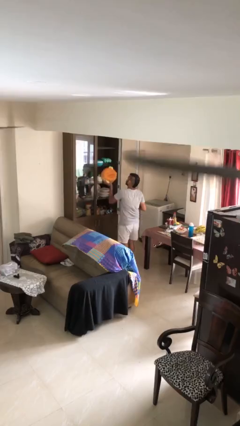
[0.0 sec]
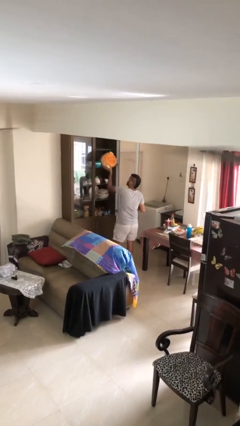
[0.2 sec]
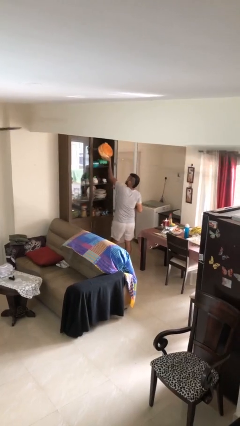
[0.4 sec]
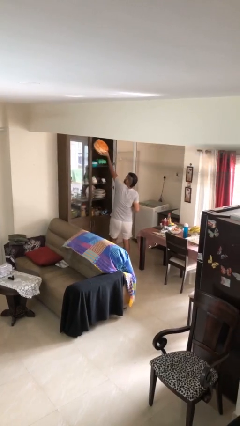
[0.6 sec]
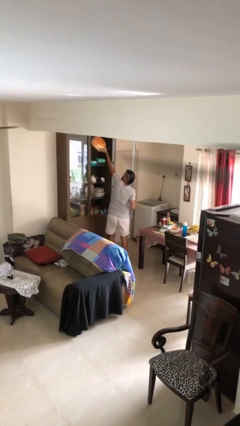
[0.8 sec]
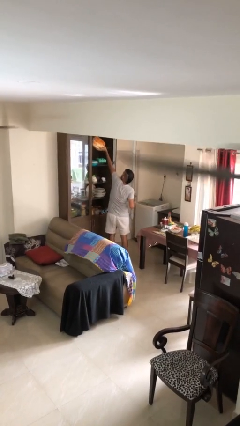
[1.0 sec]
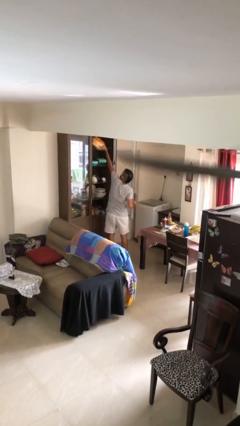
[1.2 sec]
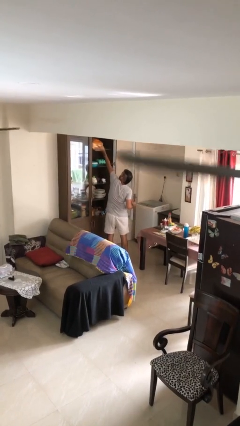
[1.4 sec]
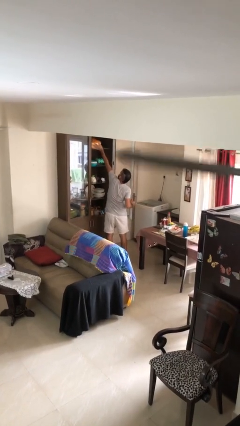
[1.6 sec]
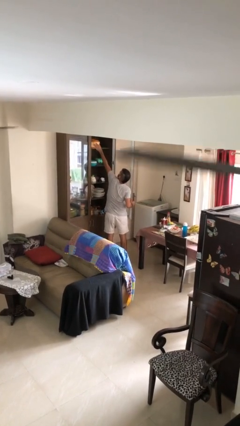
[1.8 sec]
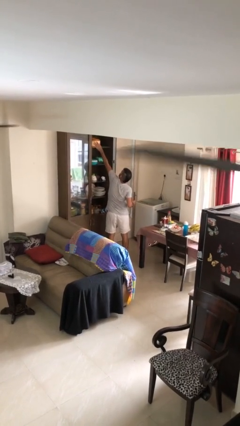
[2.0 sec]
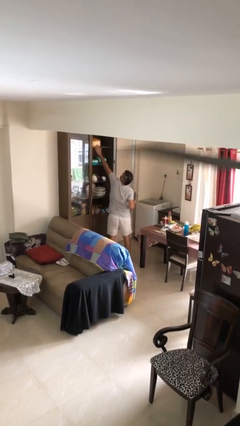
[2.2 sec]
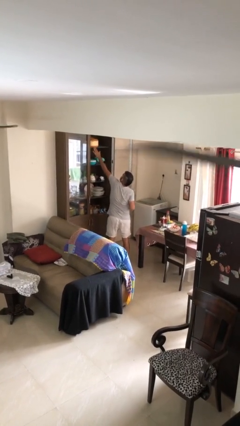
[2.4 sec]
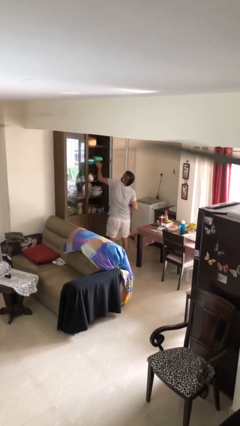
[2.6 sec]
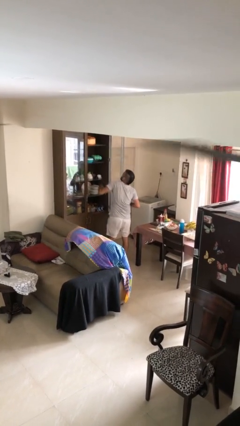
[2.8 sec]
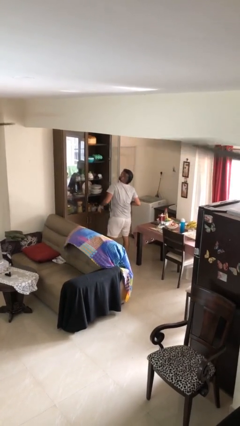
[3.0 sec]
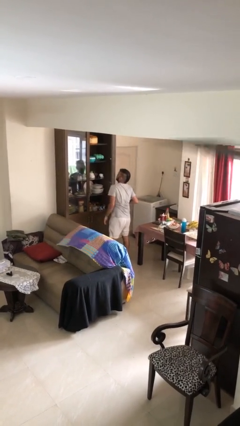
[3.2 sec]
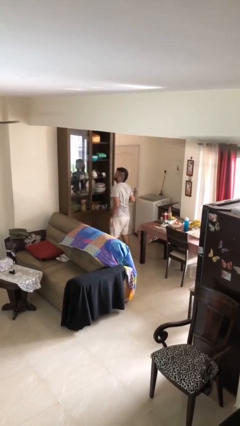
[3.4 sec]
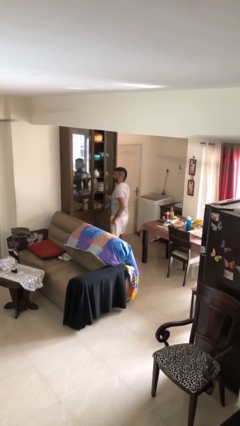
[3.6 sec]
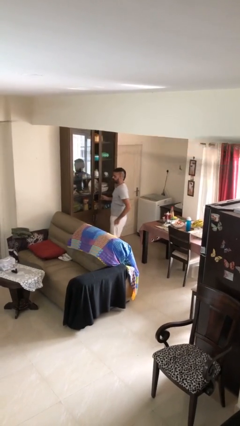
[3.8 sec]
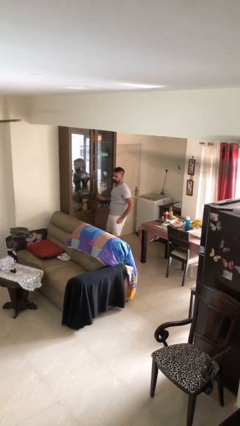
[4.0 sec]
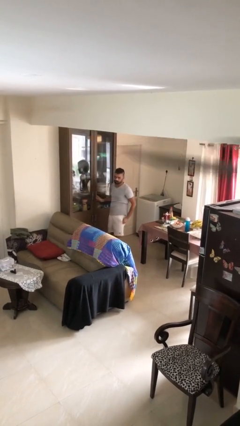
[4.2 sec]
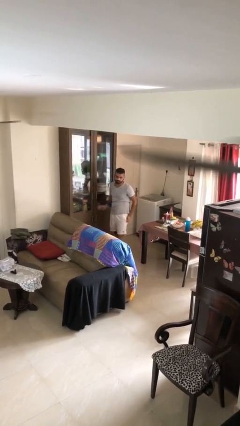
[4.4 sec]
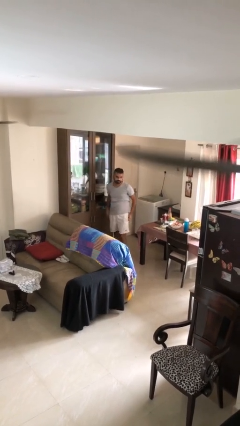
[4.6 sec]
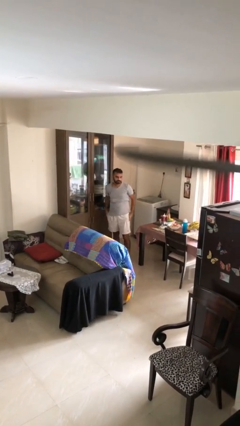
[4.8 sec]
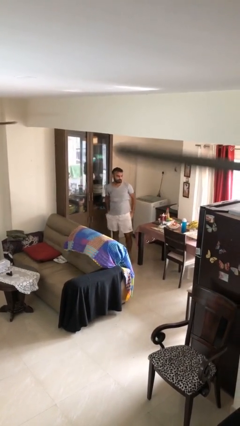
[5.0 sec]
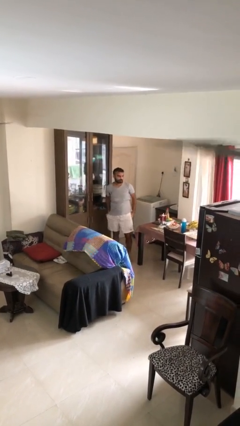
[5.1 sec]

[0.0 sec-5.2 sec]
person puts down object on shelf

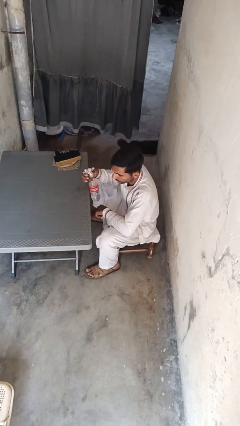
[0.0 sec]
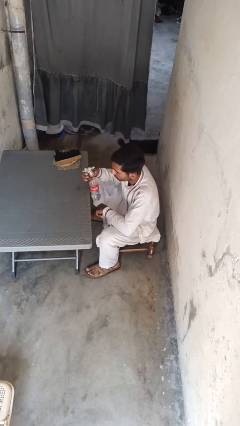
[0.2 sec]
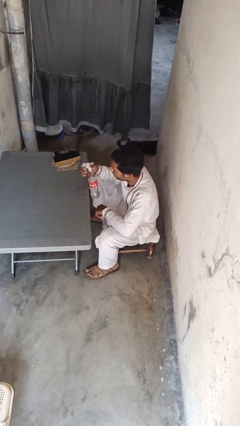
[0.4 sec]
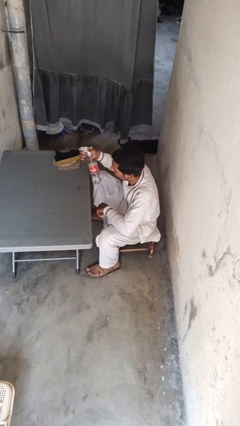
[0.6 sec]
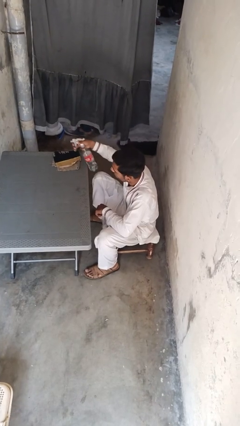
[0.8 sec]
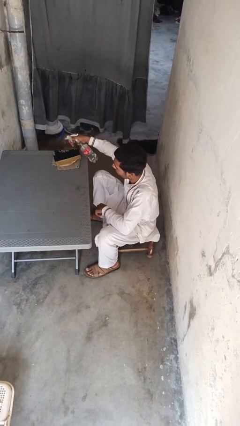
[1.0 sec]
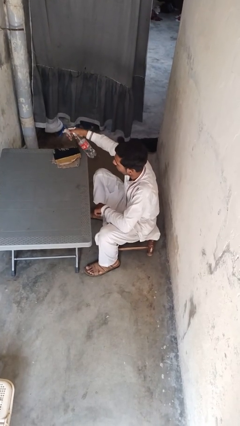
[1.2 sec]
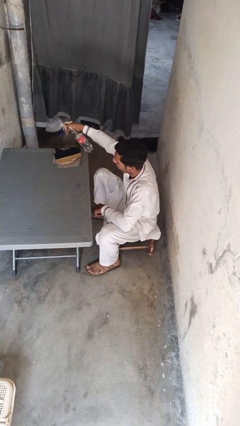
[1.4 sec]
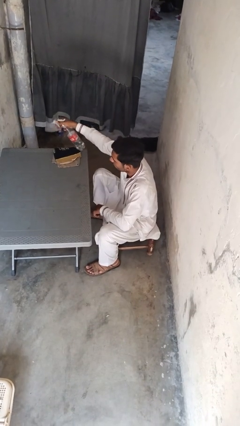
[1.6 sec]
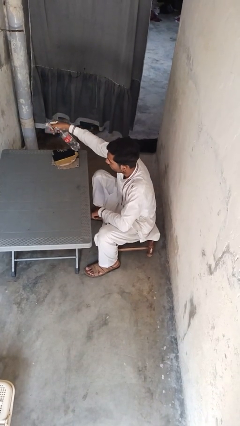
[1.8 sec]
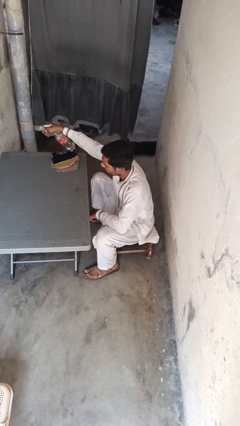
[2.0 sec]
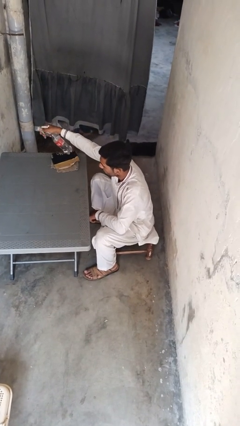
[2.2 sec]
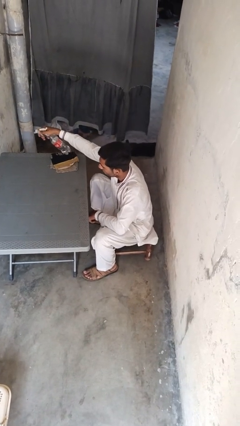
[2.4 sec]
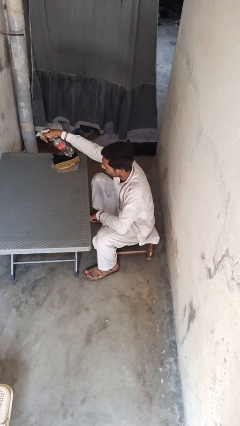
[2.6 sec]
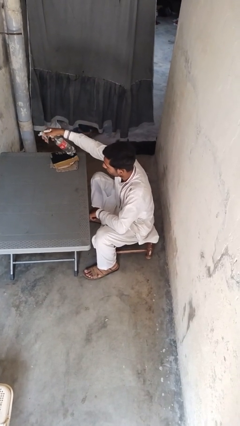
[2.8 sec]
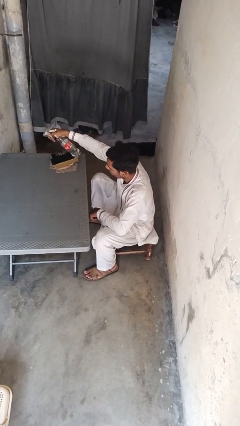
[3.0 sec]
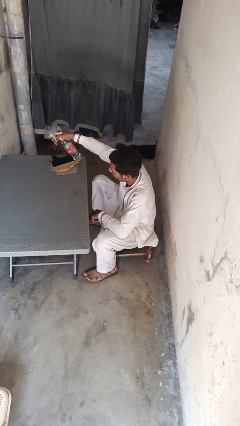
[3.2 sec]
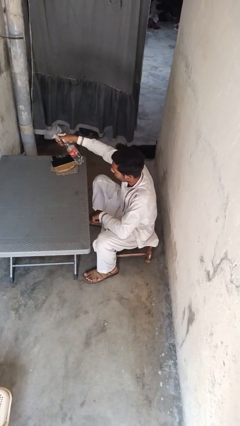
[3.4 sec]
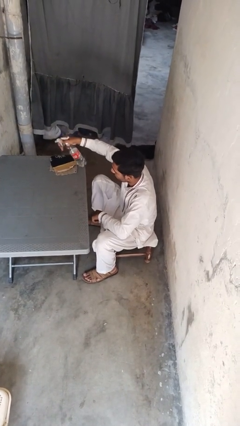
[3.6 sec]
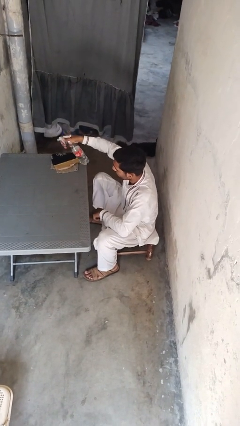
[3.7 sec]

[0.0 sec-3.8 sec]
person sprays from bottle

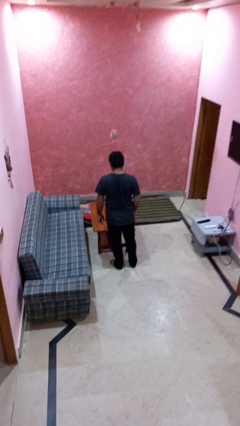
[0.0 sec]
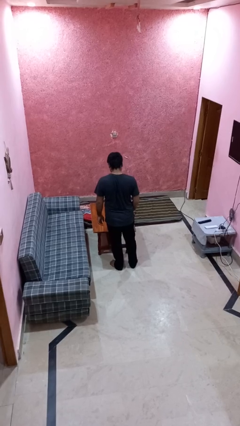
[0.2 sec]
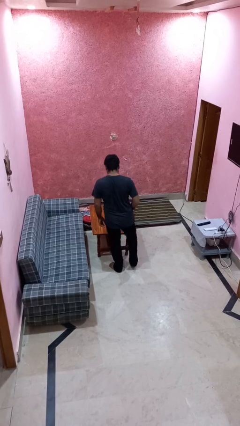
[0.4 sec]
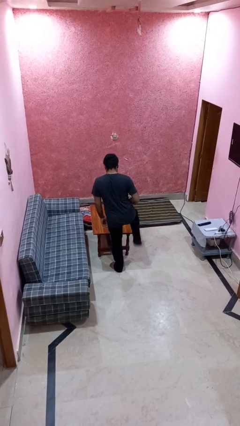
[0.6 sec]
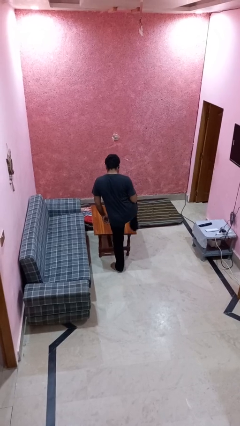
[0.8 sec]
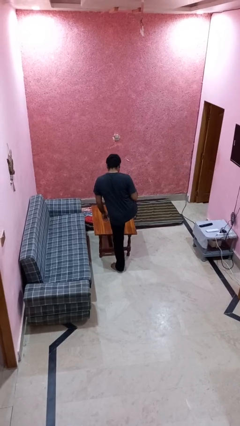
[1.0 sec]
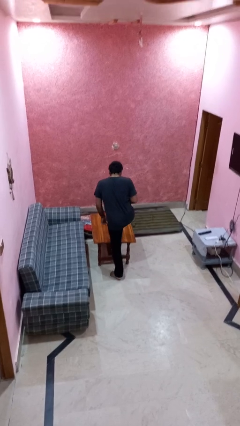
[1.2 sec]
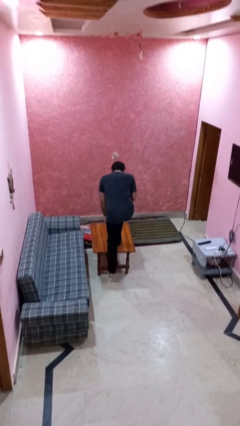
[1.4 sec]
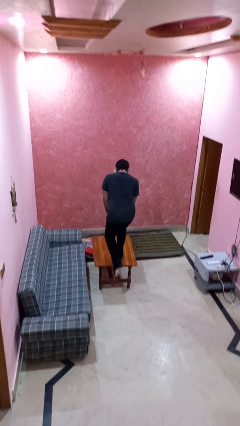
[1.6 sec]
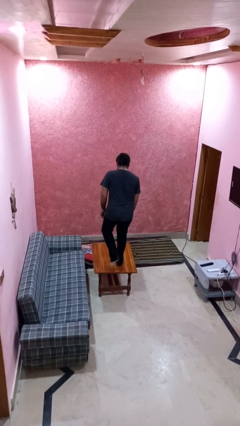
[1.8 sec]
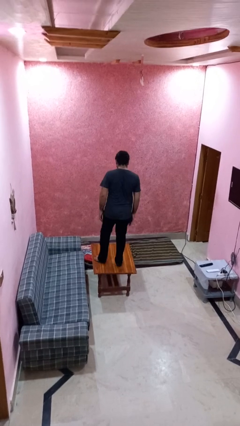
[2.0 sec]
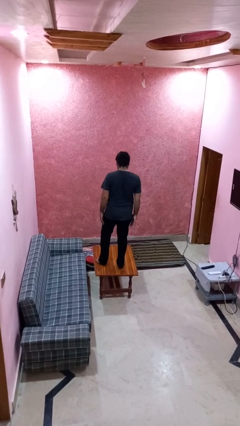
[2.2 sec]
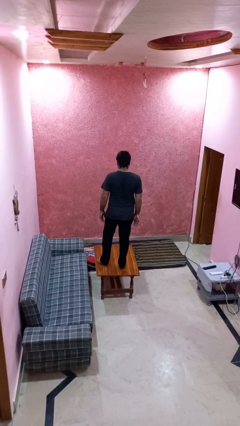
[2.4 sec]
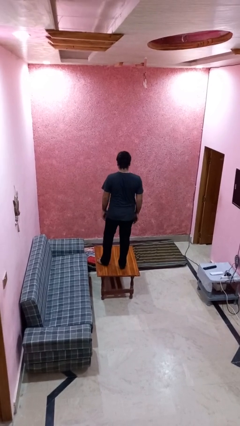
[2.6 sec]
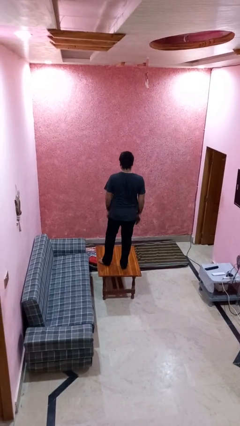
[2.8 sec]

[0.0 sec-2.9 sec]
person climbs on table

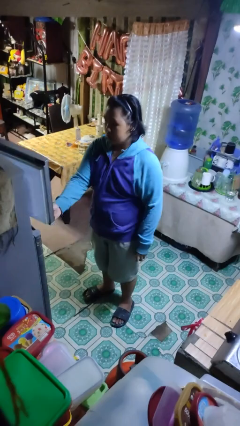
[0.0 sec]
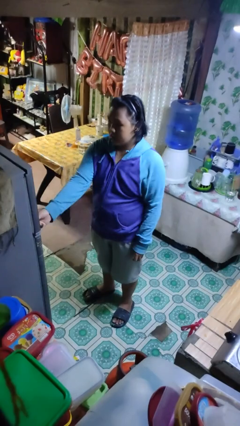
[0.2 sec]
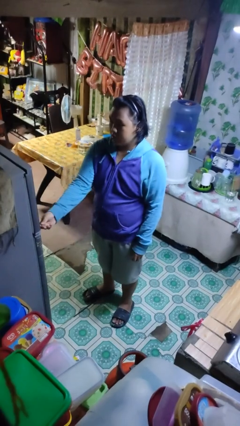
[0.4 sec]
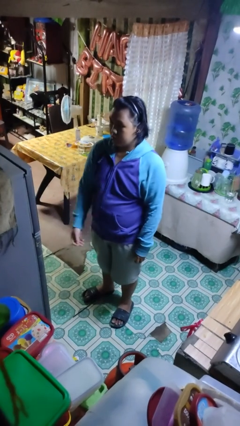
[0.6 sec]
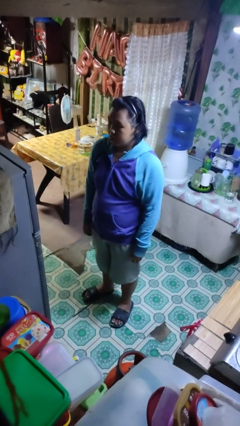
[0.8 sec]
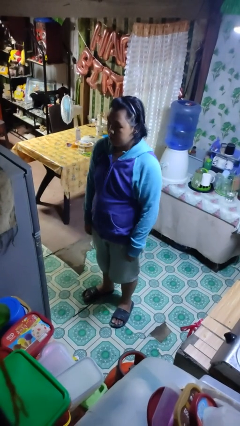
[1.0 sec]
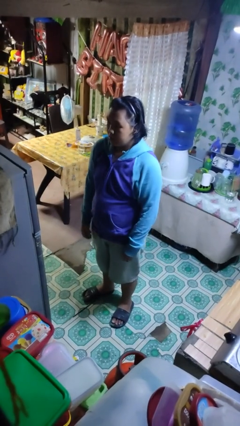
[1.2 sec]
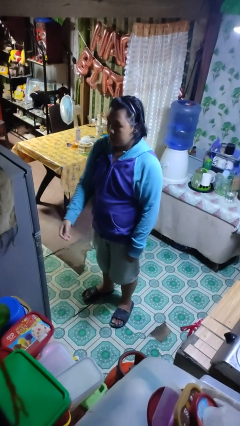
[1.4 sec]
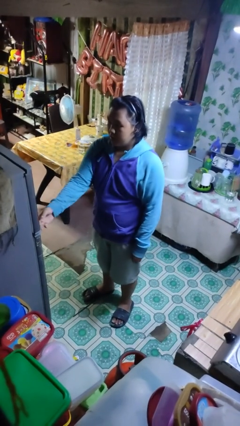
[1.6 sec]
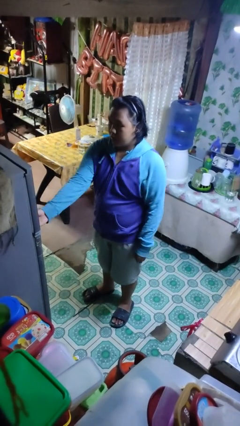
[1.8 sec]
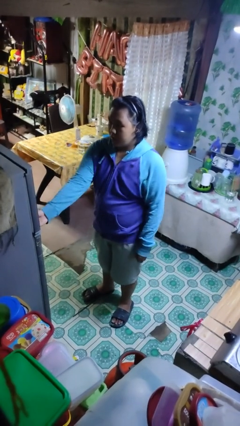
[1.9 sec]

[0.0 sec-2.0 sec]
person closes refrigerator

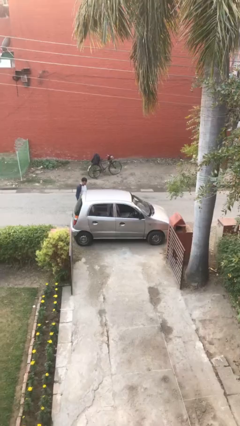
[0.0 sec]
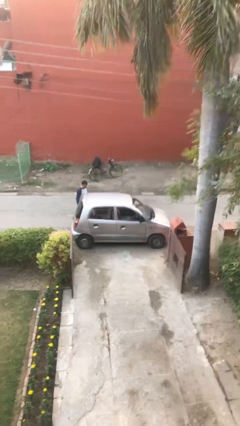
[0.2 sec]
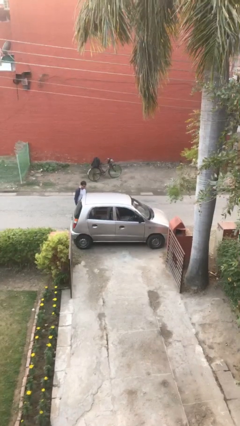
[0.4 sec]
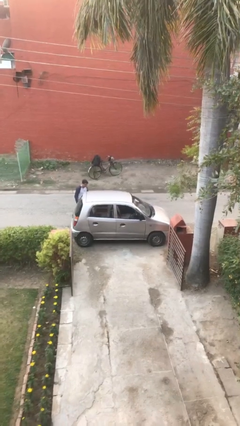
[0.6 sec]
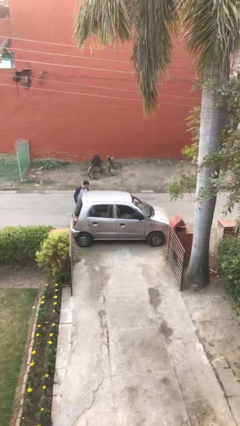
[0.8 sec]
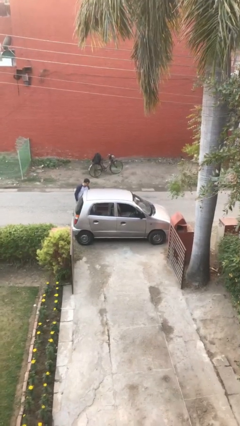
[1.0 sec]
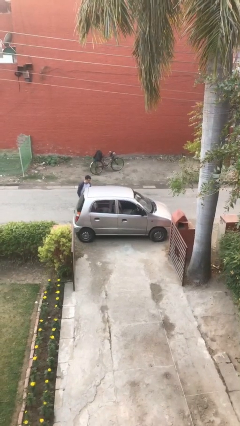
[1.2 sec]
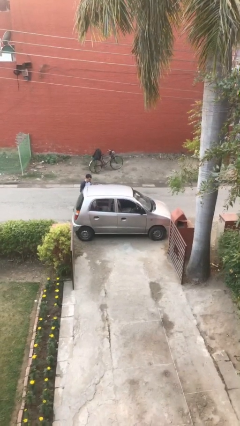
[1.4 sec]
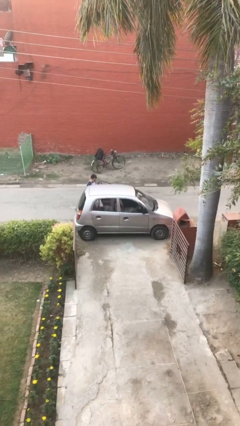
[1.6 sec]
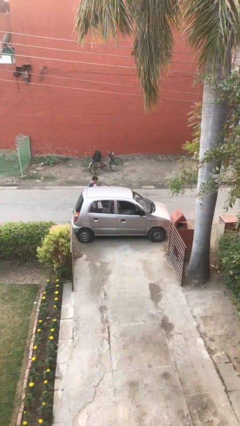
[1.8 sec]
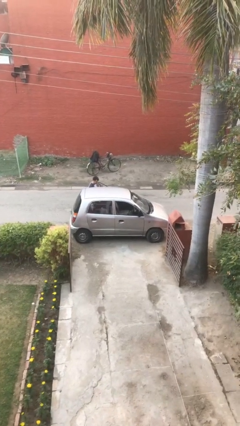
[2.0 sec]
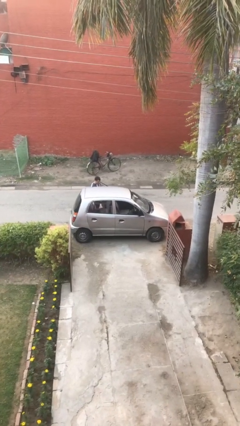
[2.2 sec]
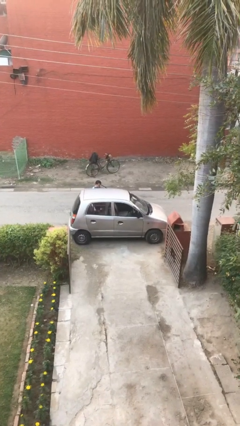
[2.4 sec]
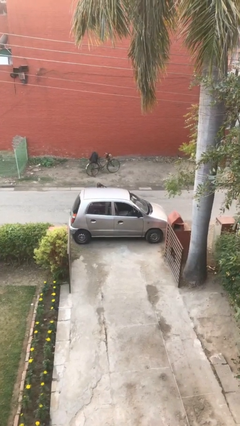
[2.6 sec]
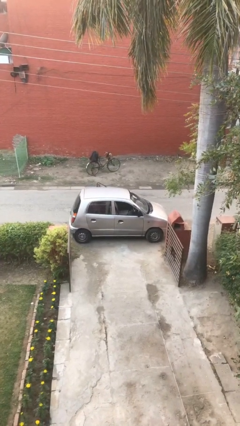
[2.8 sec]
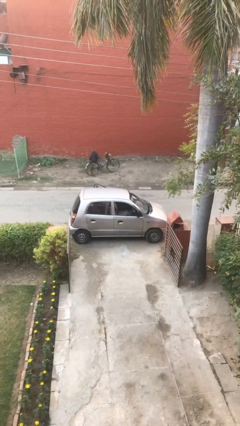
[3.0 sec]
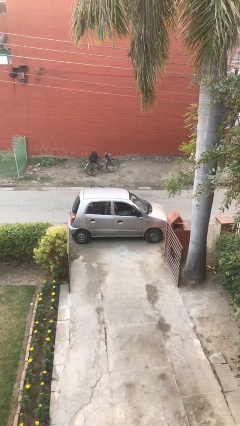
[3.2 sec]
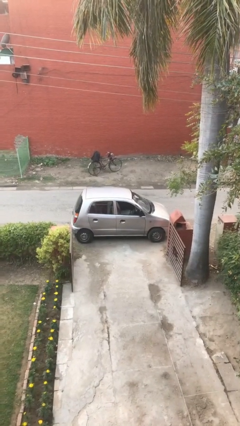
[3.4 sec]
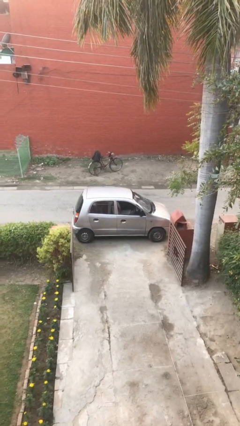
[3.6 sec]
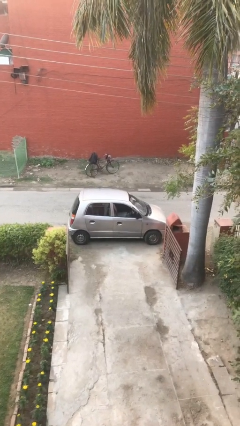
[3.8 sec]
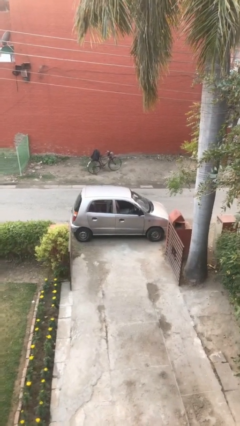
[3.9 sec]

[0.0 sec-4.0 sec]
car picks up person
